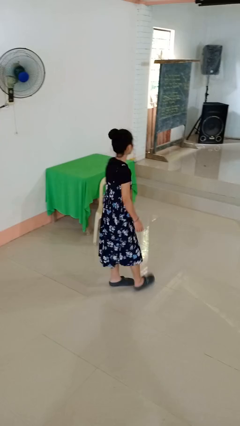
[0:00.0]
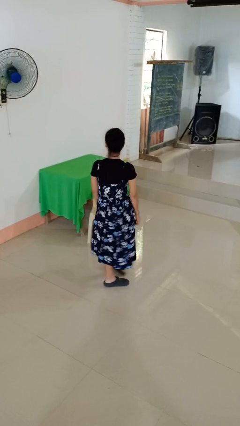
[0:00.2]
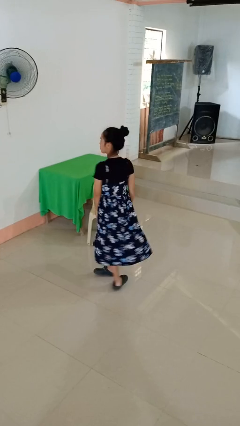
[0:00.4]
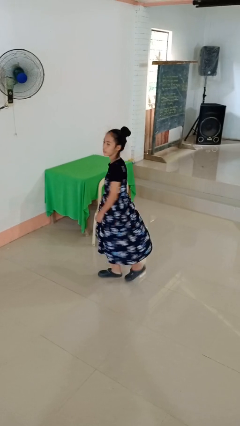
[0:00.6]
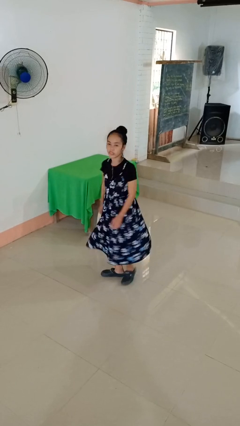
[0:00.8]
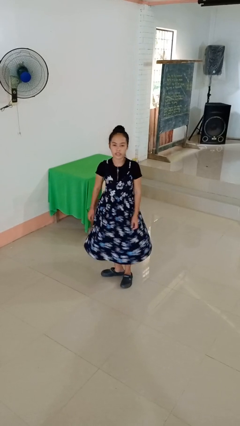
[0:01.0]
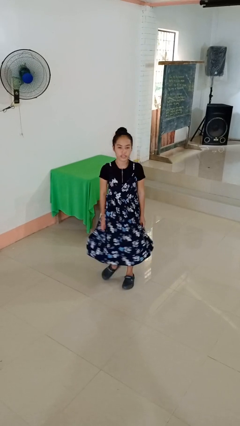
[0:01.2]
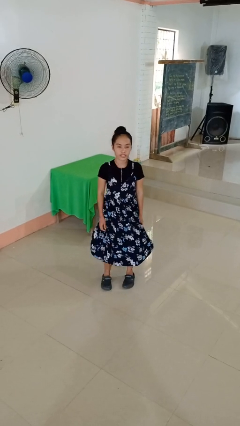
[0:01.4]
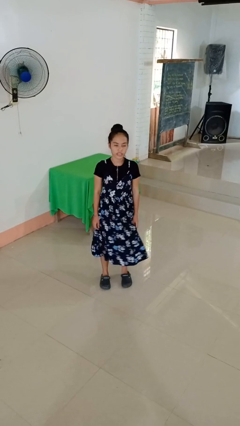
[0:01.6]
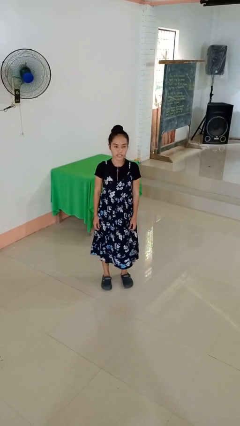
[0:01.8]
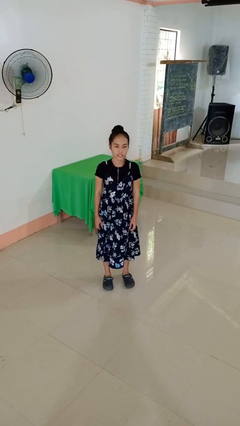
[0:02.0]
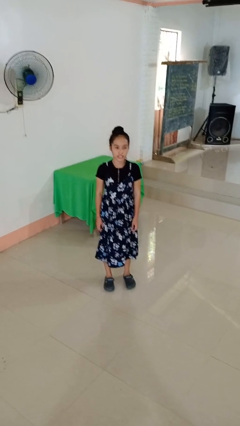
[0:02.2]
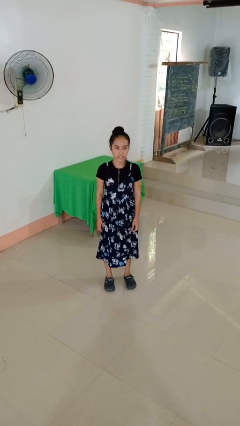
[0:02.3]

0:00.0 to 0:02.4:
person twirls

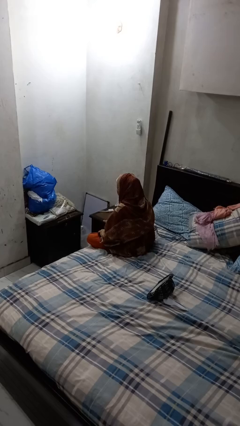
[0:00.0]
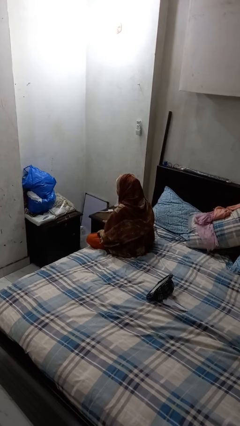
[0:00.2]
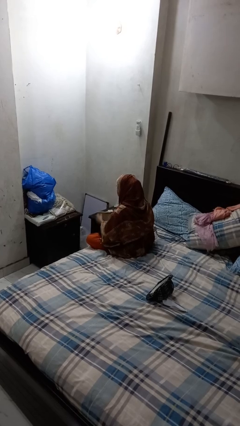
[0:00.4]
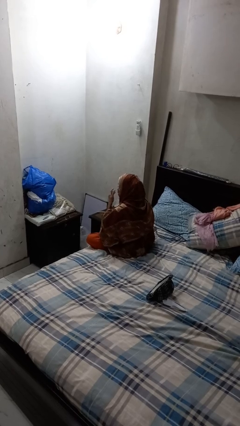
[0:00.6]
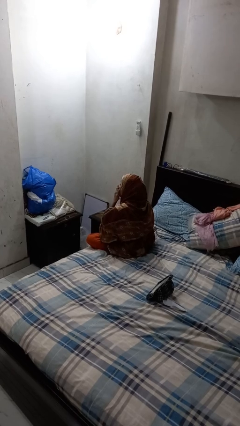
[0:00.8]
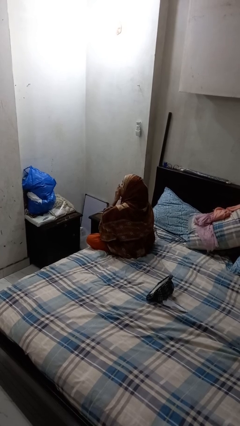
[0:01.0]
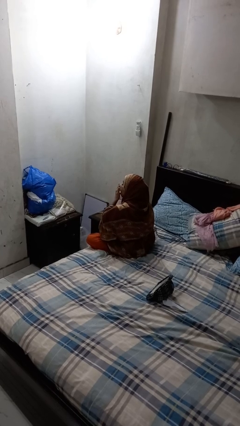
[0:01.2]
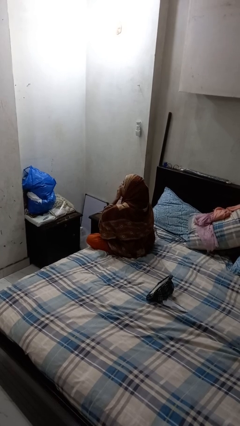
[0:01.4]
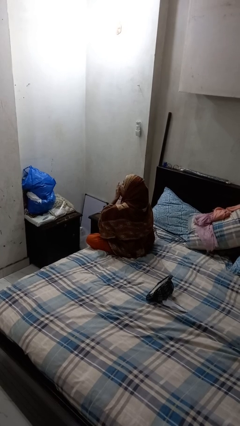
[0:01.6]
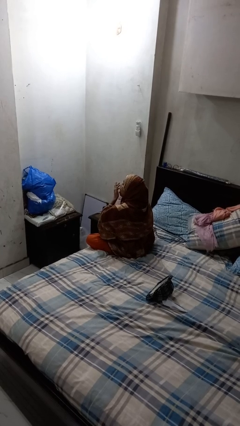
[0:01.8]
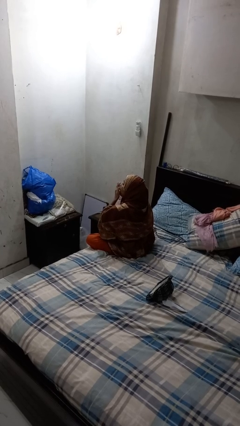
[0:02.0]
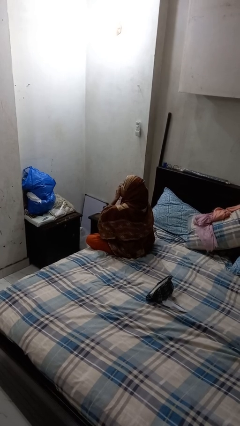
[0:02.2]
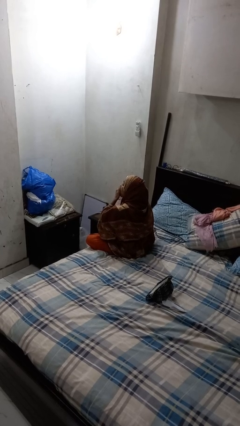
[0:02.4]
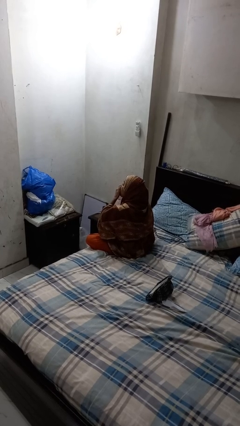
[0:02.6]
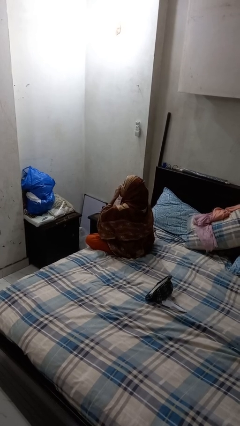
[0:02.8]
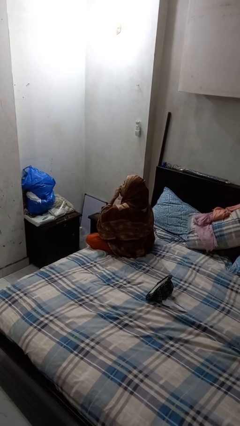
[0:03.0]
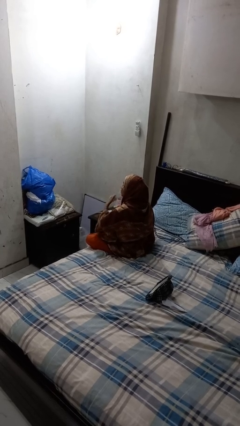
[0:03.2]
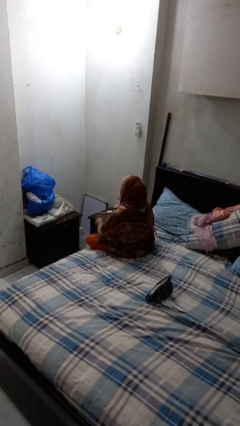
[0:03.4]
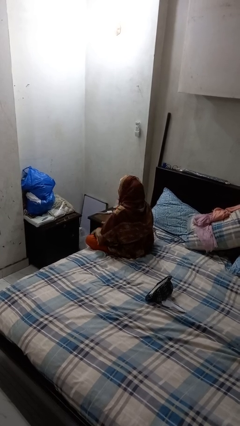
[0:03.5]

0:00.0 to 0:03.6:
person yawns

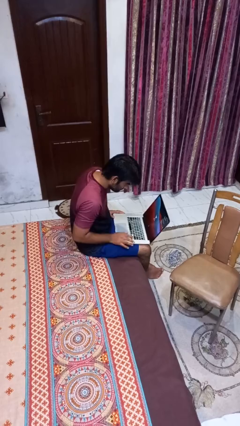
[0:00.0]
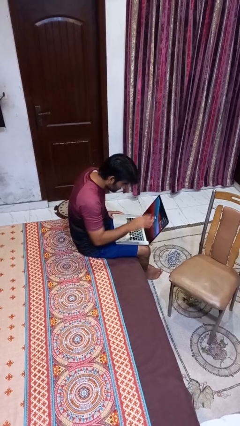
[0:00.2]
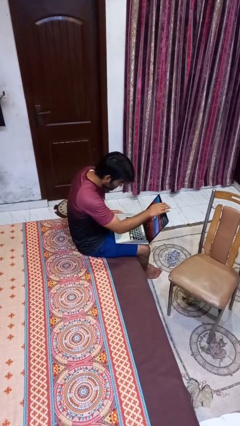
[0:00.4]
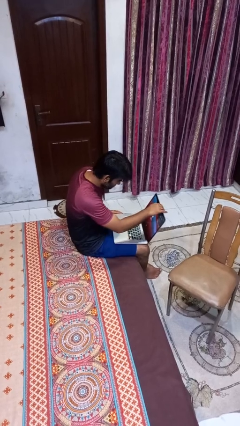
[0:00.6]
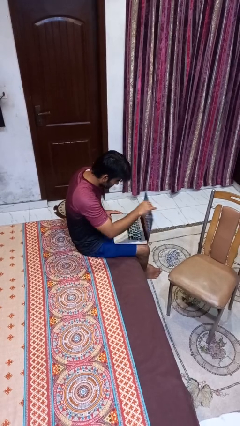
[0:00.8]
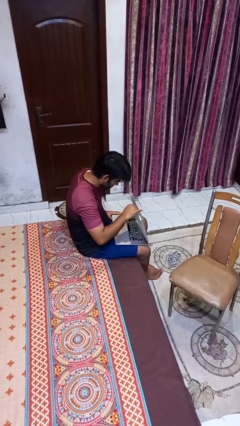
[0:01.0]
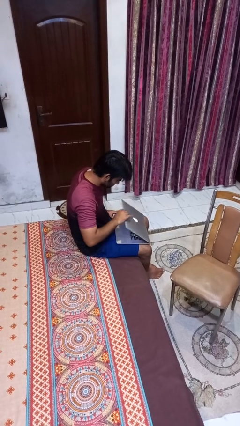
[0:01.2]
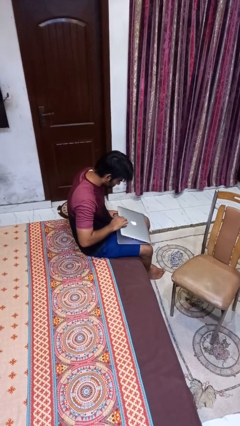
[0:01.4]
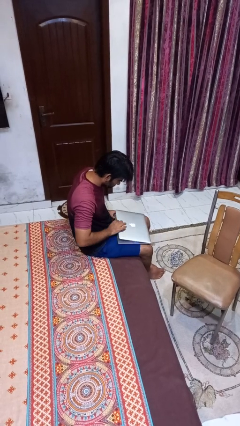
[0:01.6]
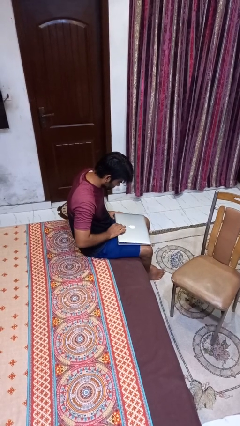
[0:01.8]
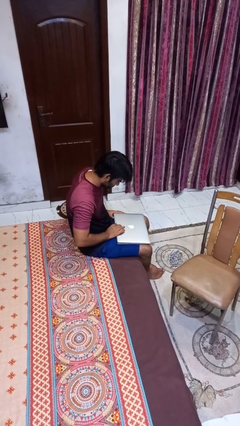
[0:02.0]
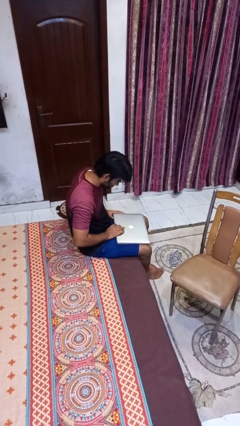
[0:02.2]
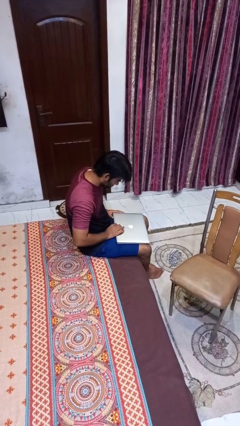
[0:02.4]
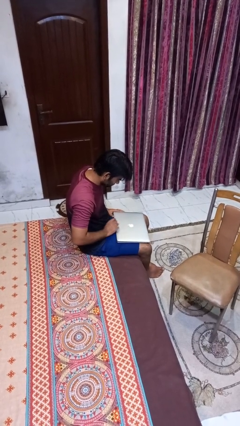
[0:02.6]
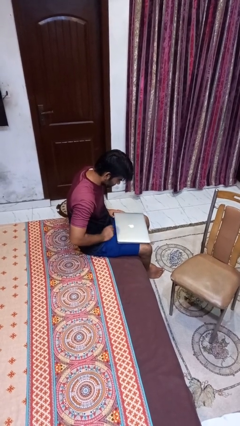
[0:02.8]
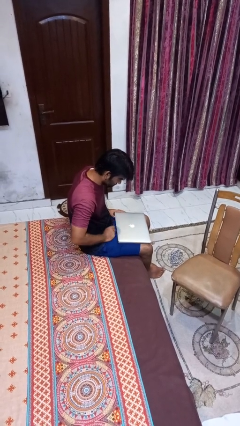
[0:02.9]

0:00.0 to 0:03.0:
person closes laptop

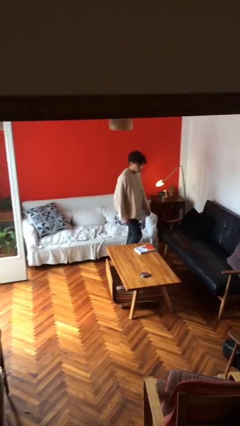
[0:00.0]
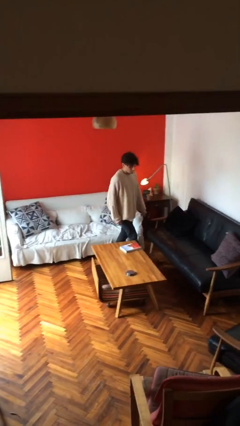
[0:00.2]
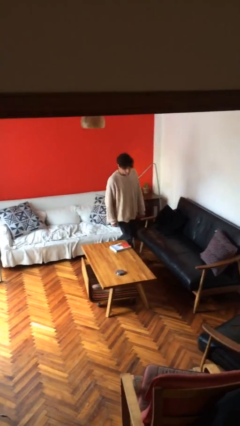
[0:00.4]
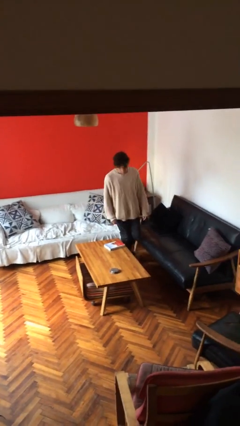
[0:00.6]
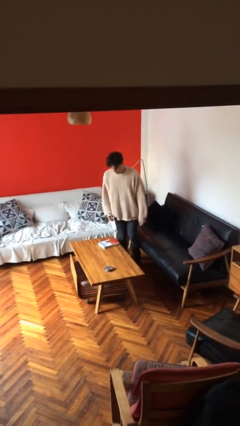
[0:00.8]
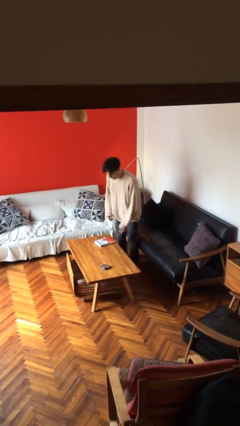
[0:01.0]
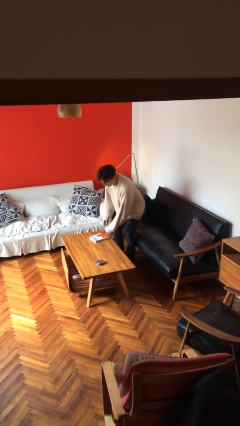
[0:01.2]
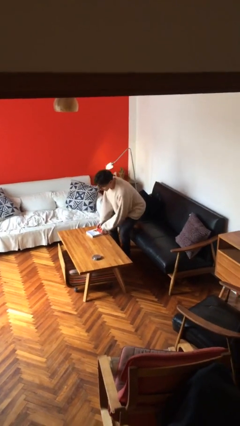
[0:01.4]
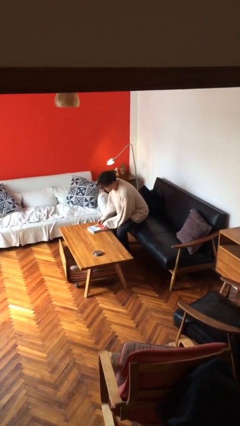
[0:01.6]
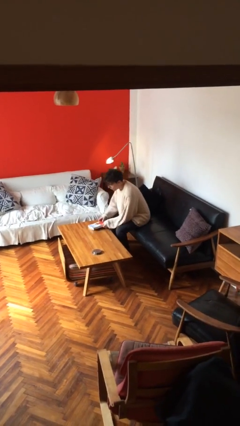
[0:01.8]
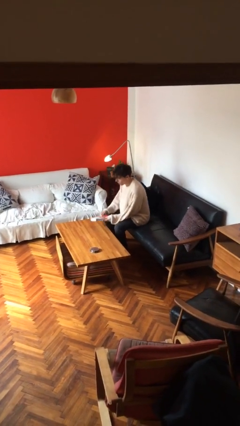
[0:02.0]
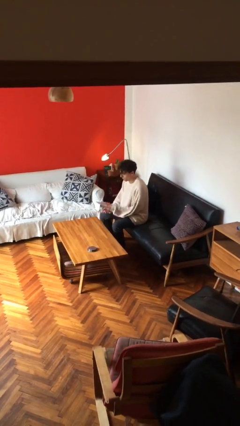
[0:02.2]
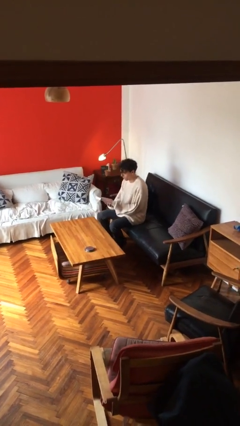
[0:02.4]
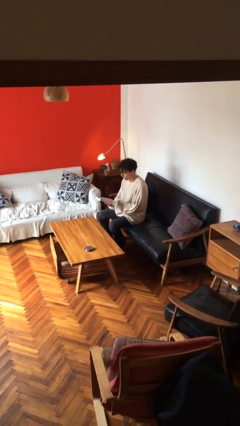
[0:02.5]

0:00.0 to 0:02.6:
person sits down

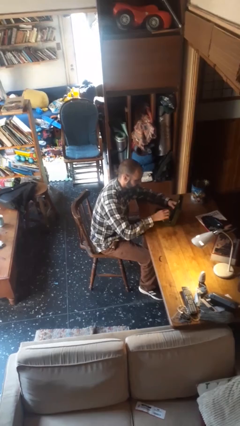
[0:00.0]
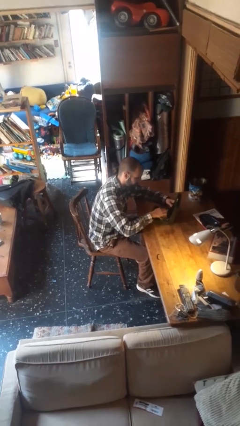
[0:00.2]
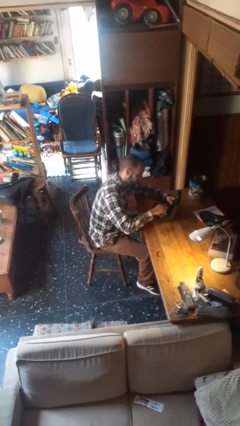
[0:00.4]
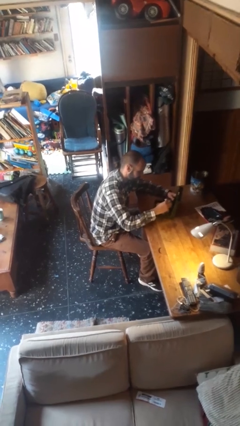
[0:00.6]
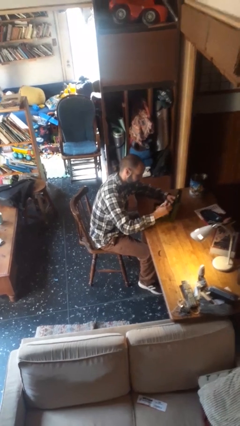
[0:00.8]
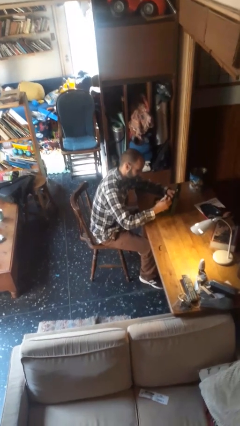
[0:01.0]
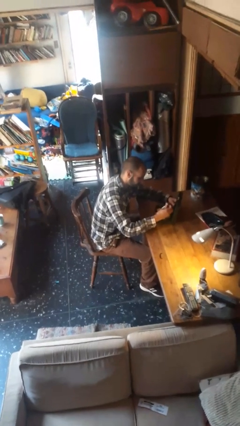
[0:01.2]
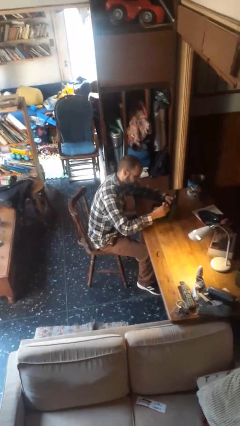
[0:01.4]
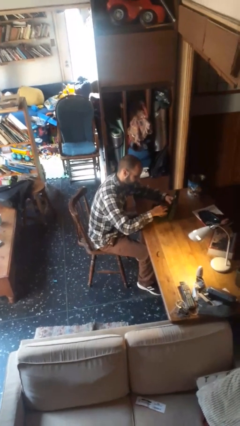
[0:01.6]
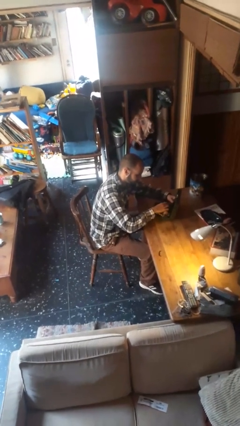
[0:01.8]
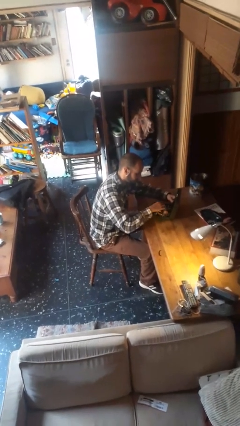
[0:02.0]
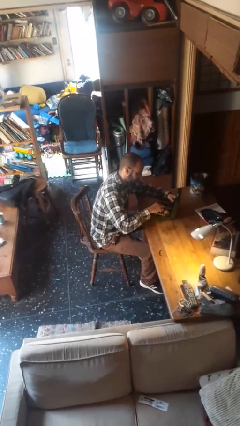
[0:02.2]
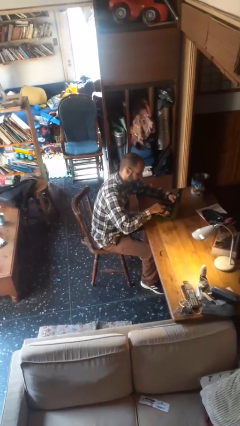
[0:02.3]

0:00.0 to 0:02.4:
person searches jewelry box

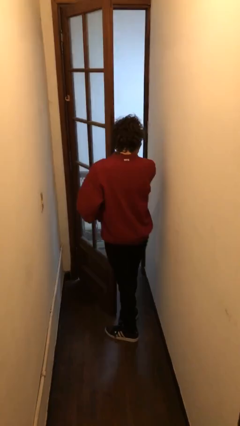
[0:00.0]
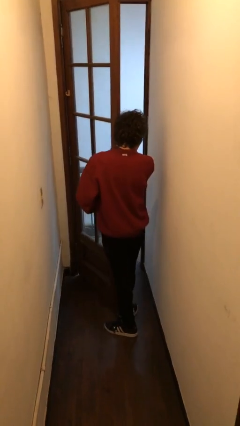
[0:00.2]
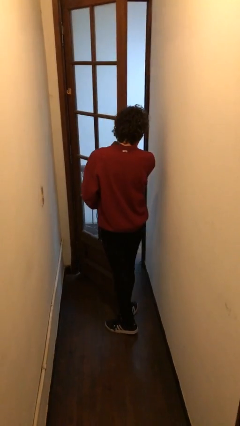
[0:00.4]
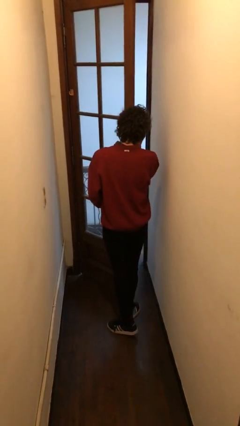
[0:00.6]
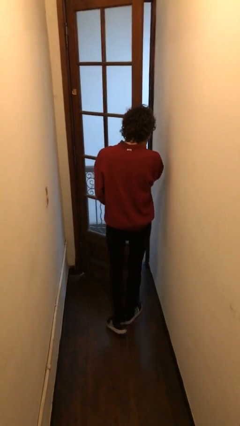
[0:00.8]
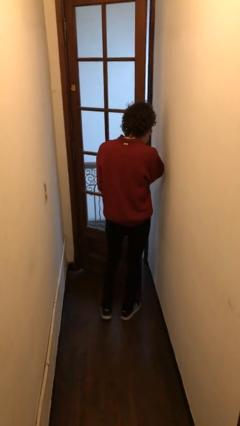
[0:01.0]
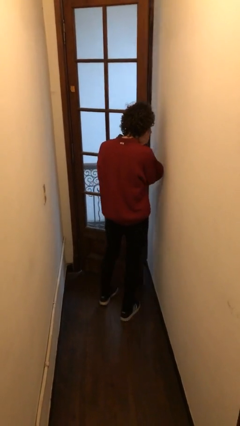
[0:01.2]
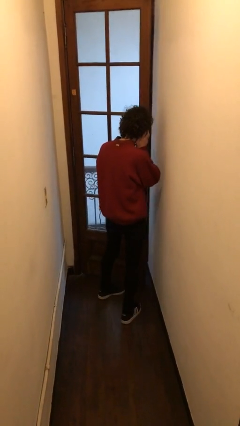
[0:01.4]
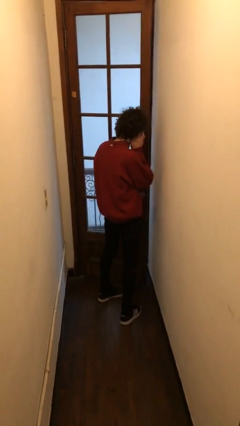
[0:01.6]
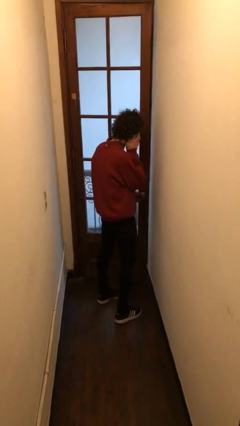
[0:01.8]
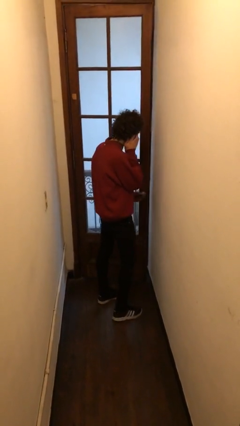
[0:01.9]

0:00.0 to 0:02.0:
person closes facility door

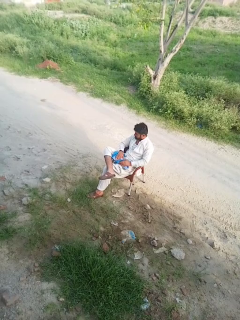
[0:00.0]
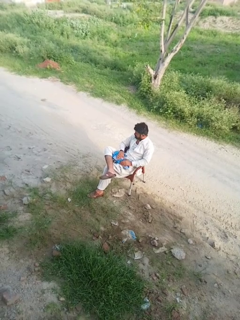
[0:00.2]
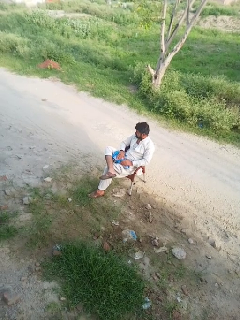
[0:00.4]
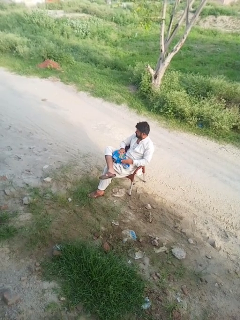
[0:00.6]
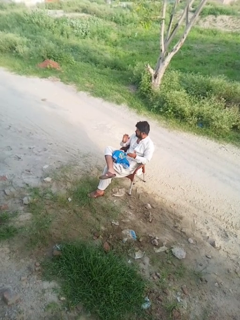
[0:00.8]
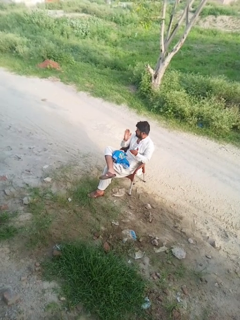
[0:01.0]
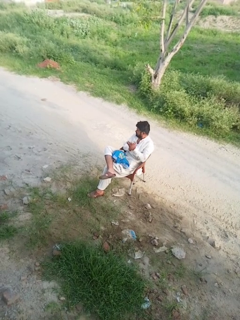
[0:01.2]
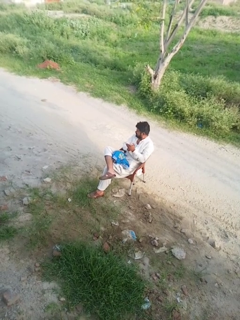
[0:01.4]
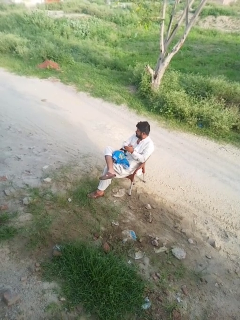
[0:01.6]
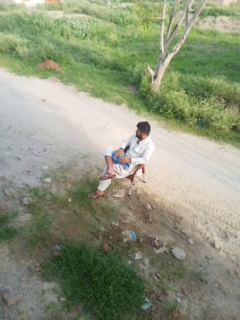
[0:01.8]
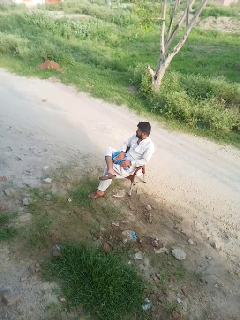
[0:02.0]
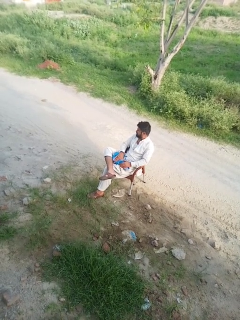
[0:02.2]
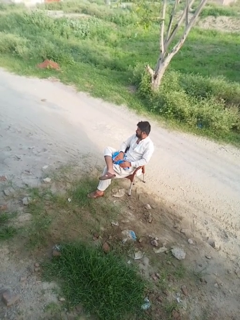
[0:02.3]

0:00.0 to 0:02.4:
person claps hands
